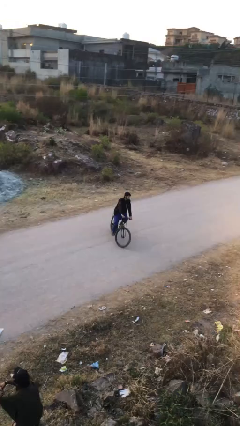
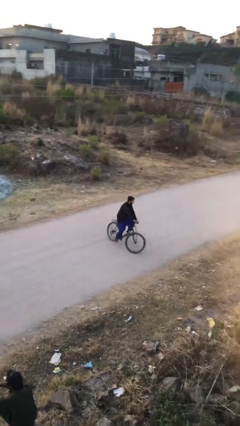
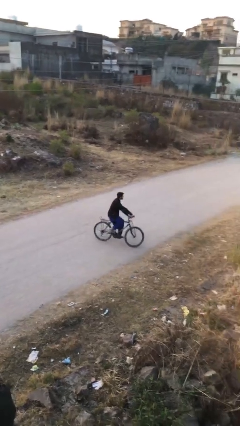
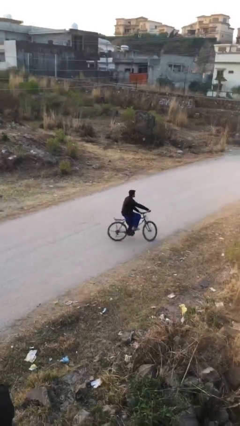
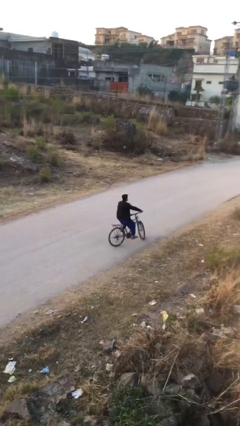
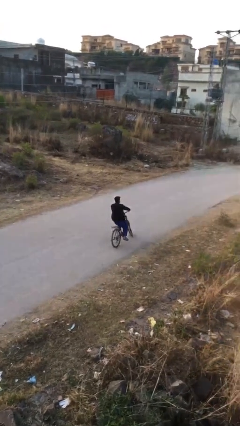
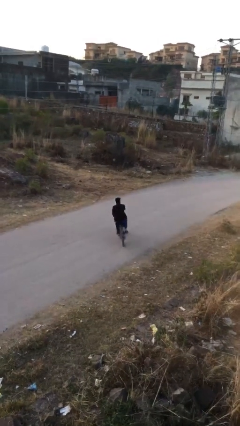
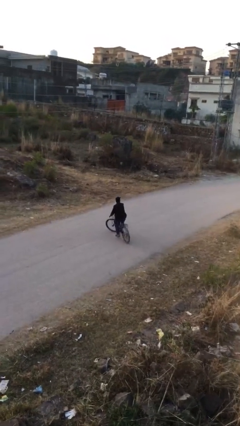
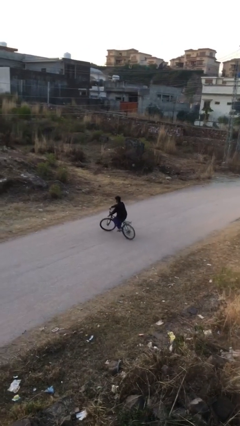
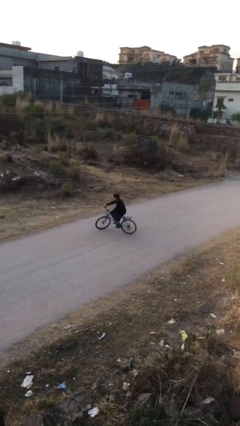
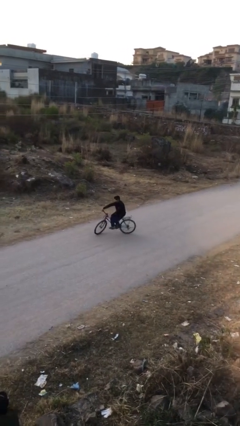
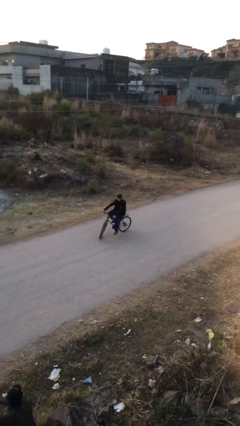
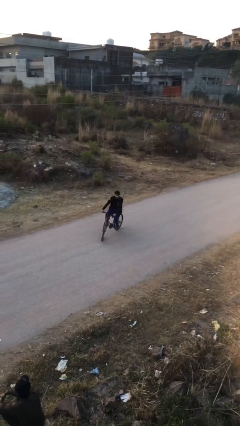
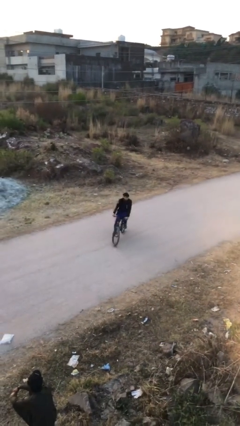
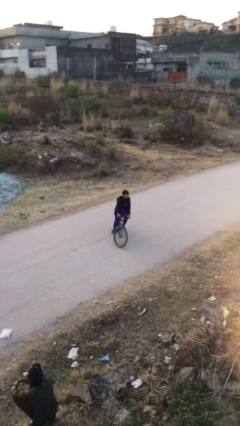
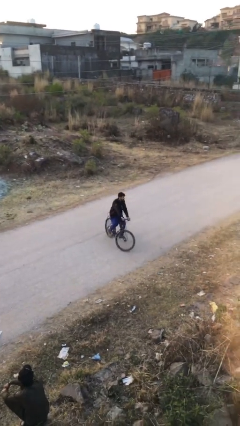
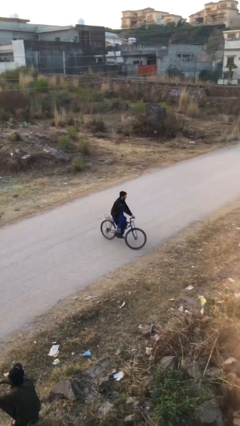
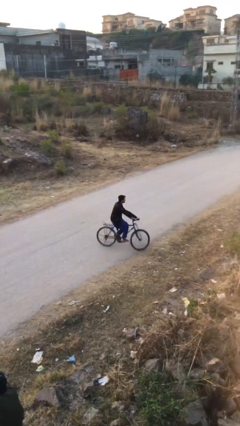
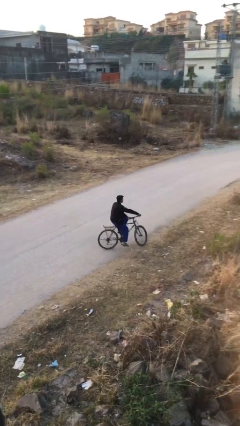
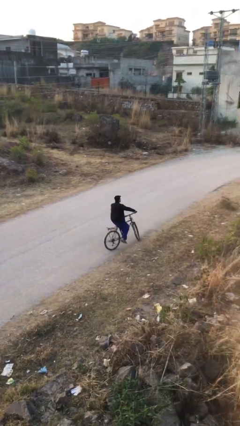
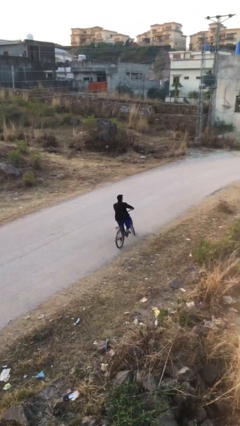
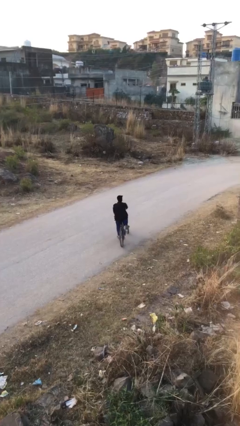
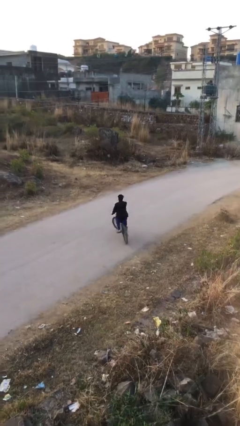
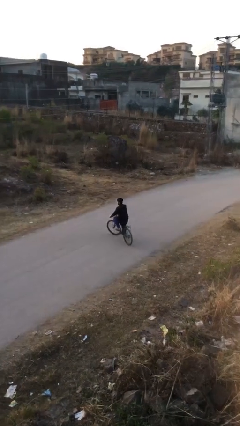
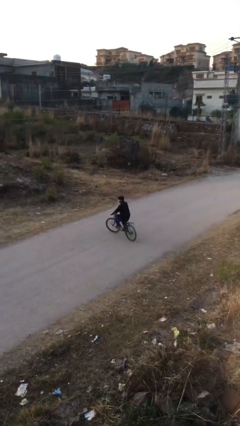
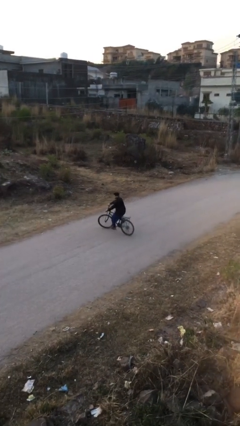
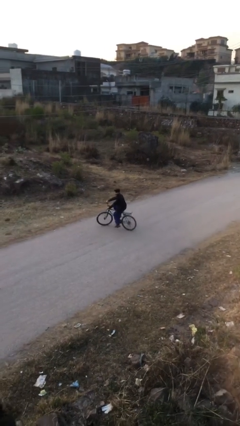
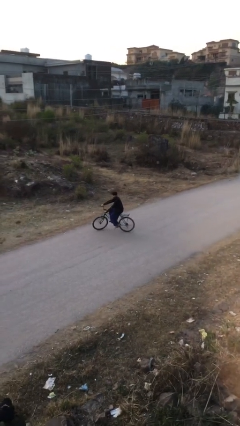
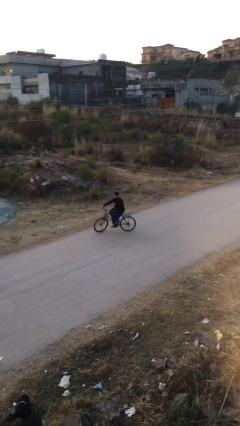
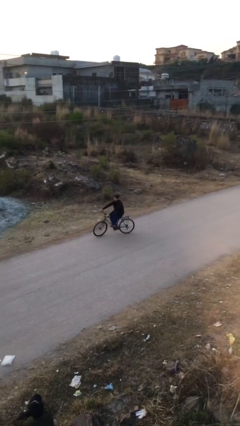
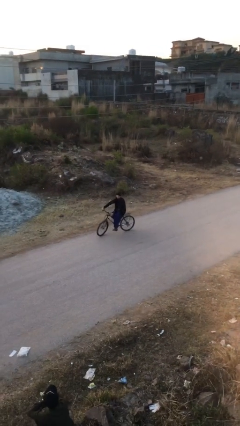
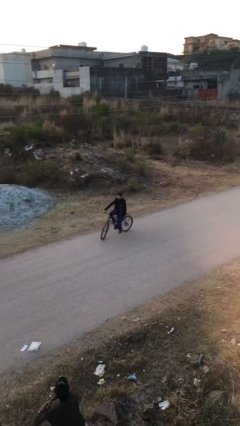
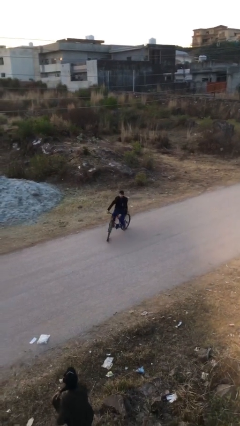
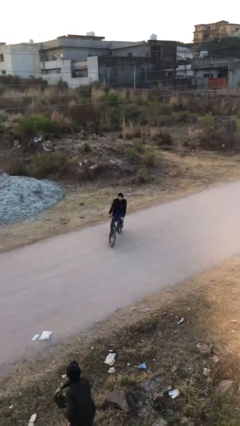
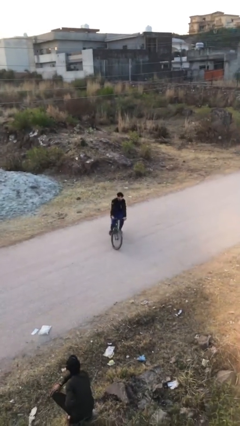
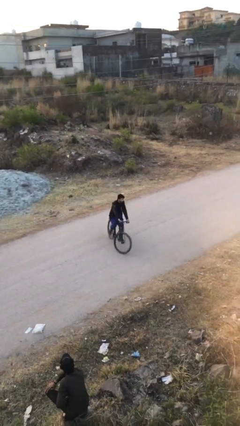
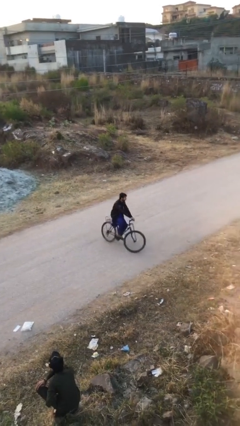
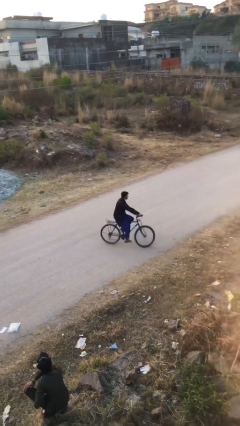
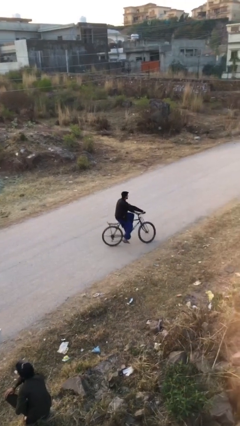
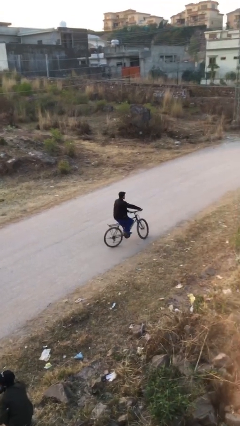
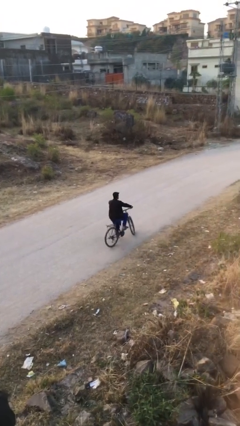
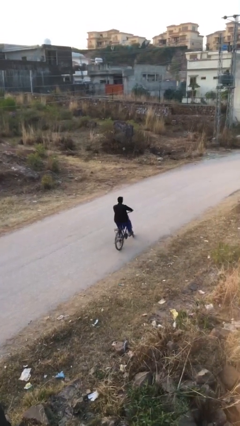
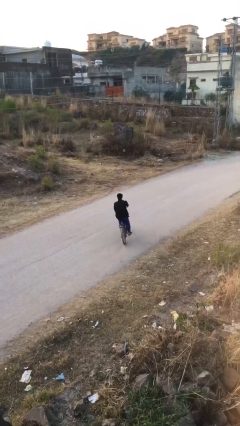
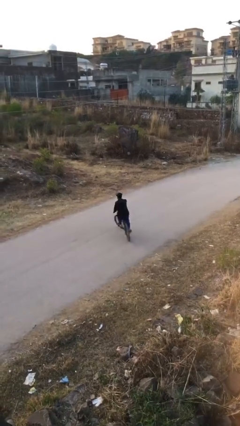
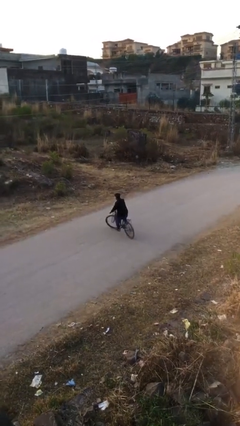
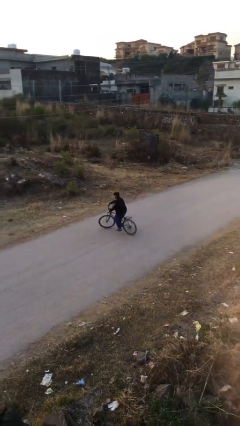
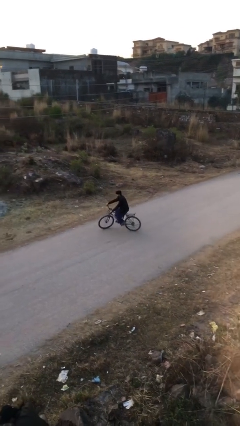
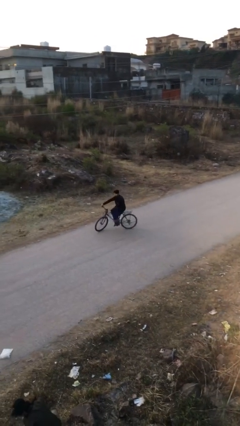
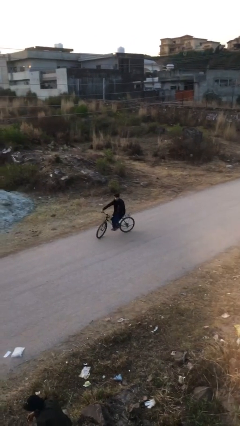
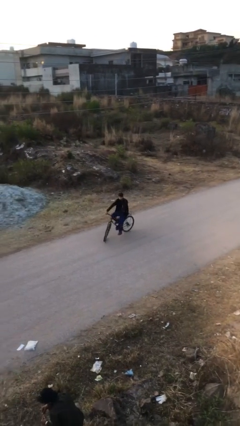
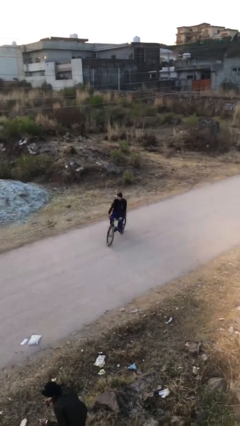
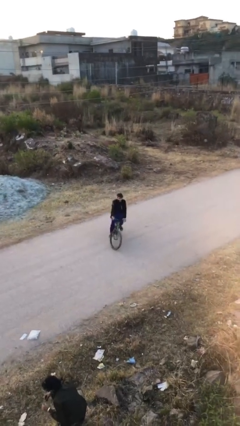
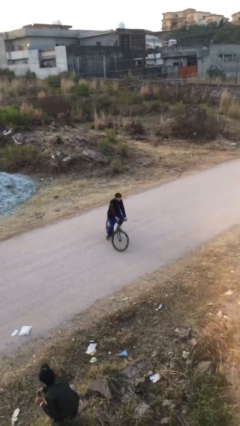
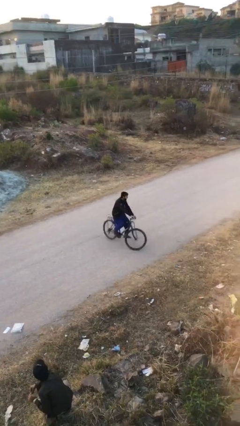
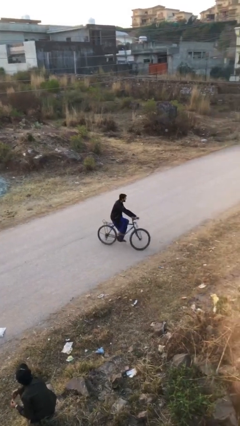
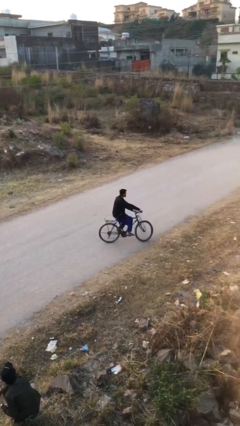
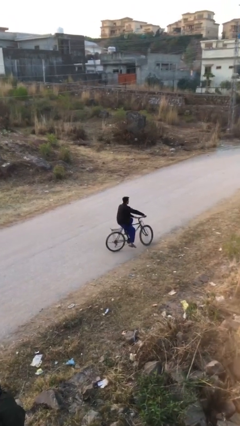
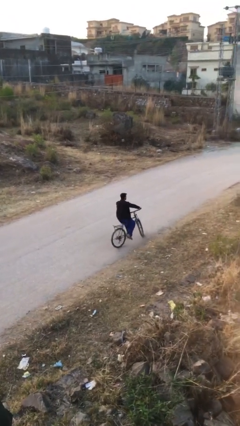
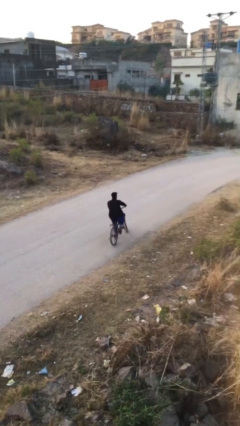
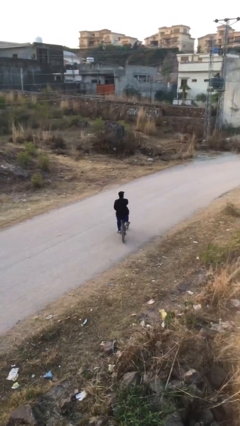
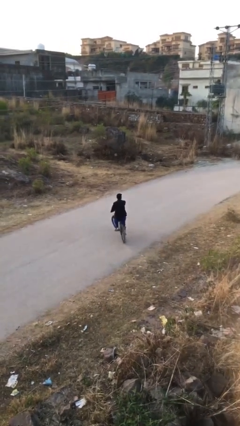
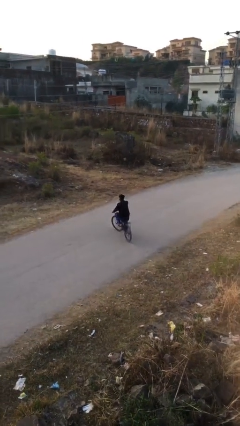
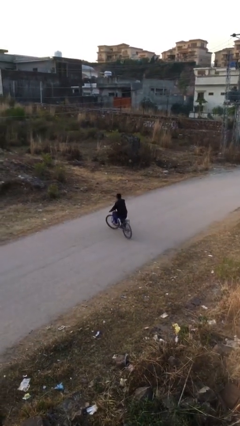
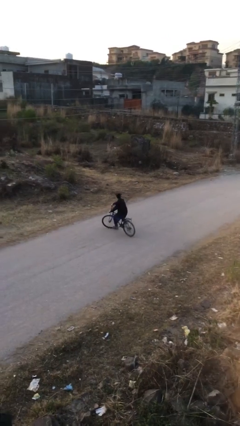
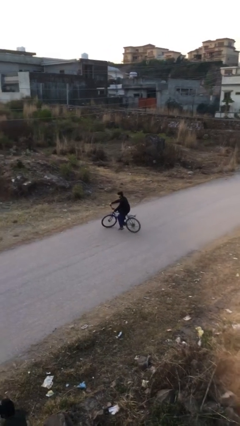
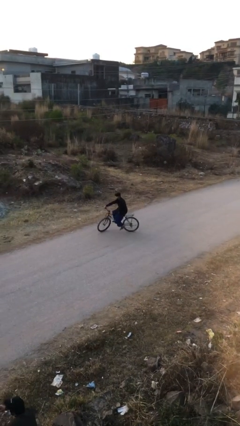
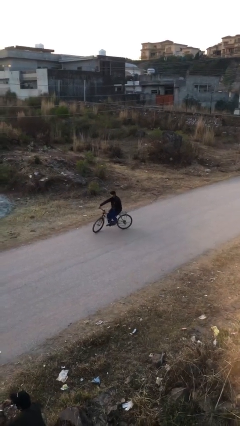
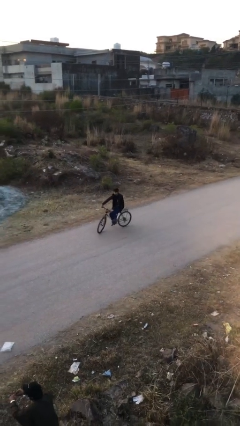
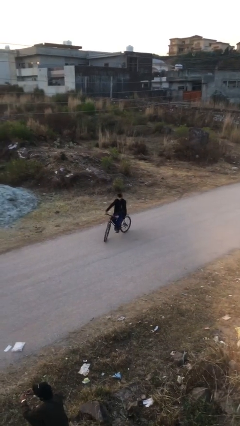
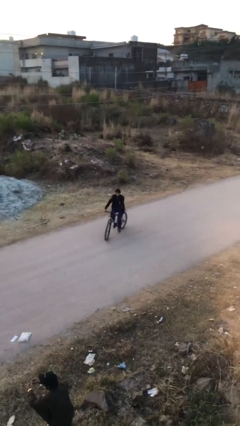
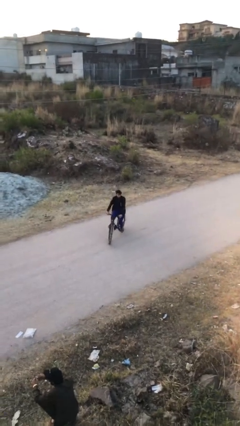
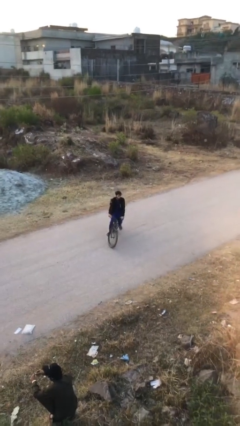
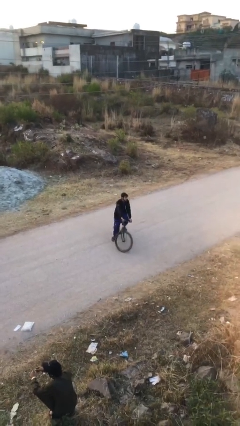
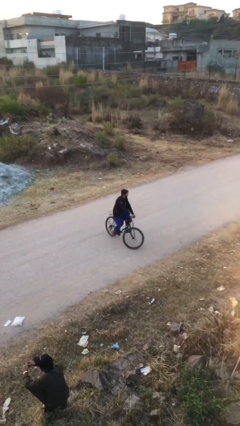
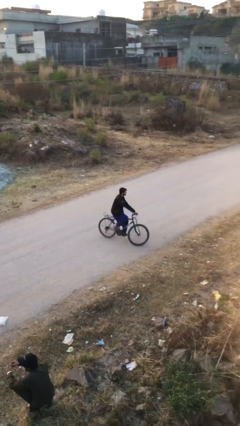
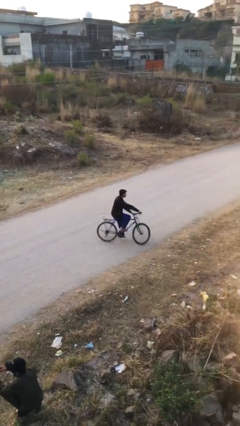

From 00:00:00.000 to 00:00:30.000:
person rides bicycle

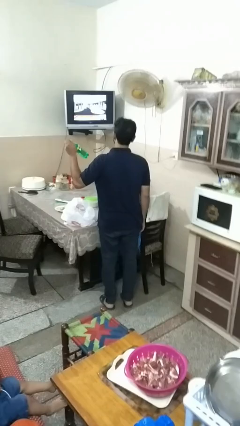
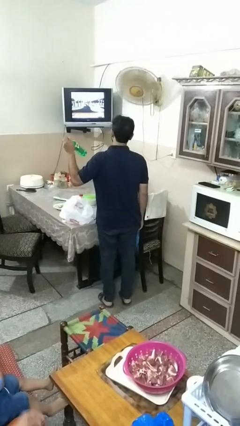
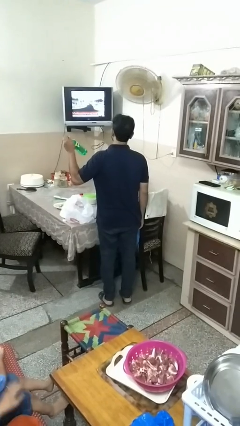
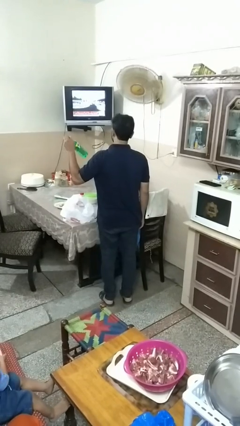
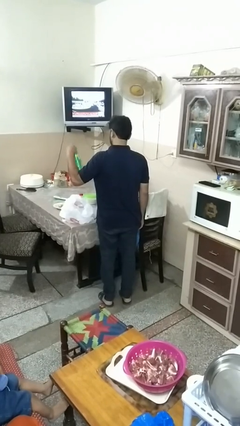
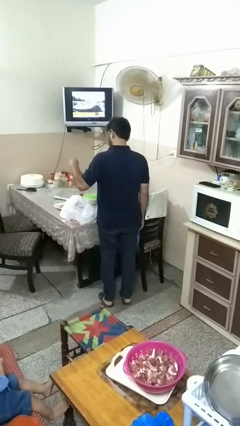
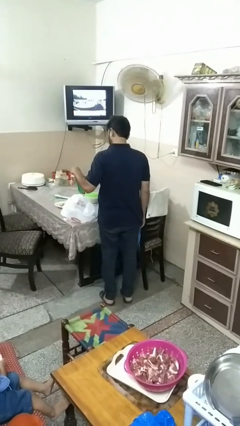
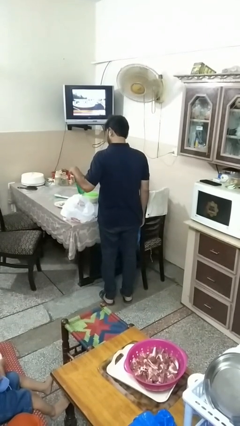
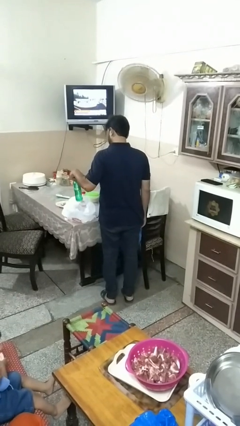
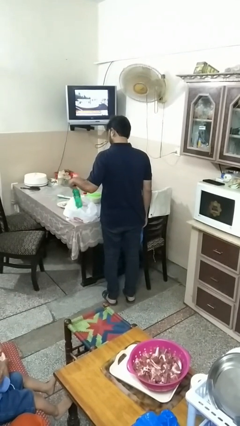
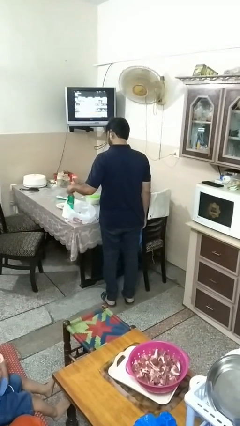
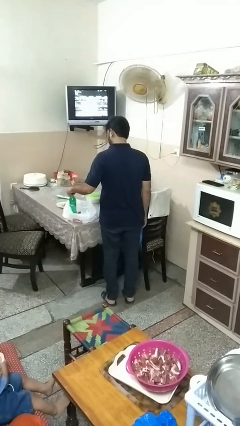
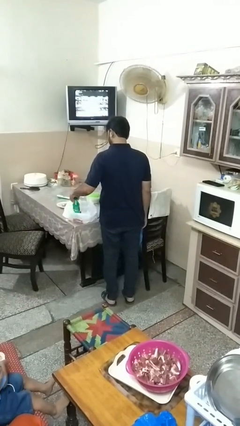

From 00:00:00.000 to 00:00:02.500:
person puts object into bag

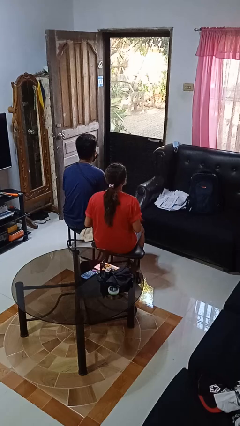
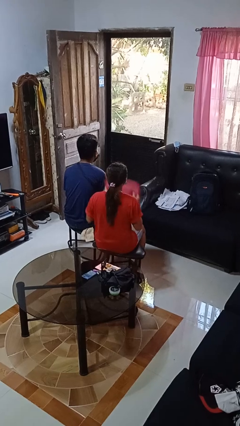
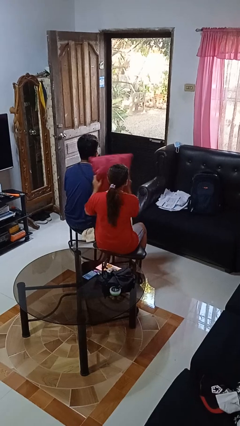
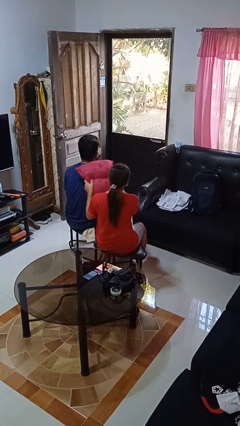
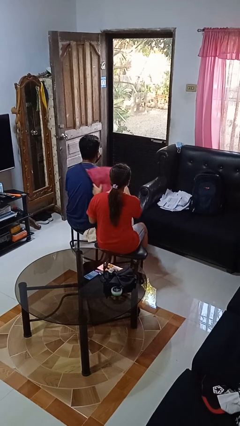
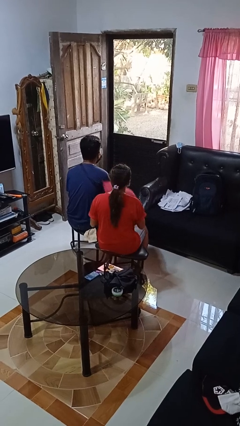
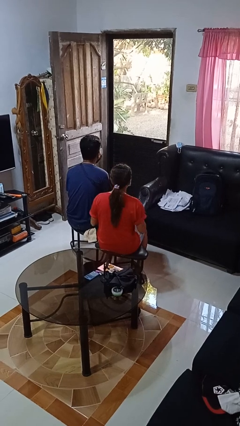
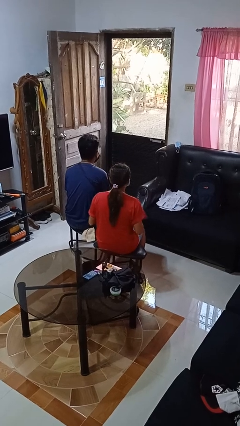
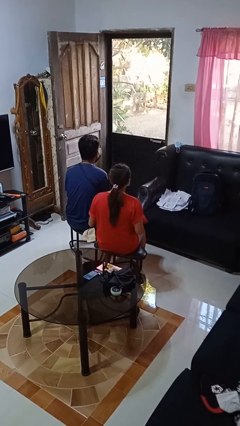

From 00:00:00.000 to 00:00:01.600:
person hits person with pillow
